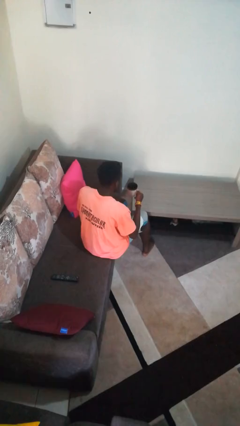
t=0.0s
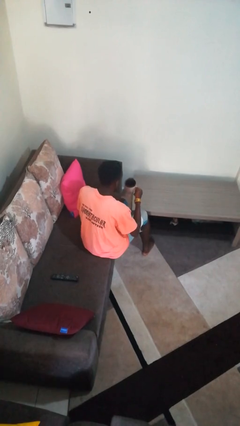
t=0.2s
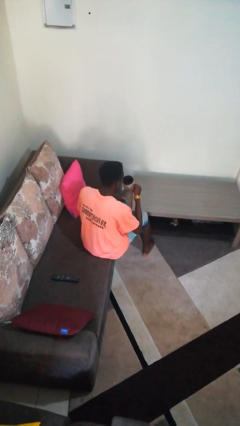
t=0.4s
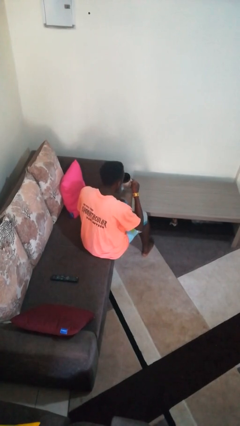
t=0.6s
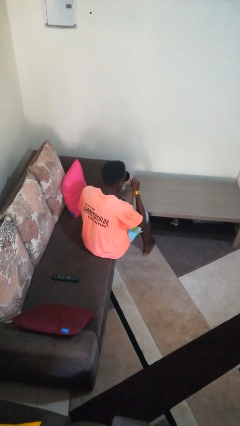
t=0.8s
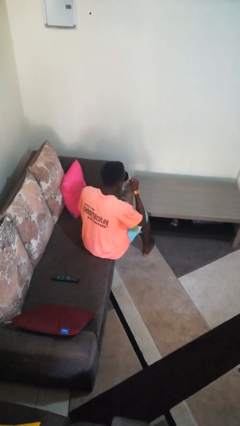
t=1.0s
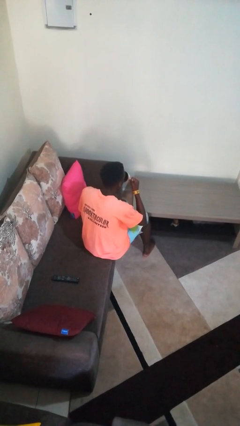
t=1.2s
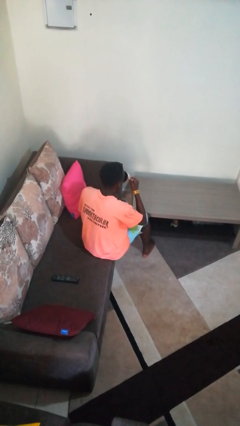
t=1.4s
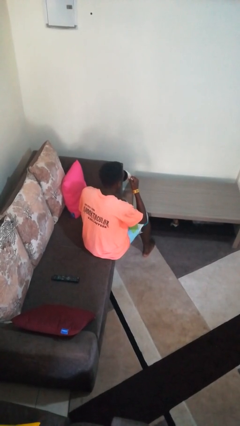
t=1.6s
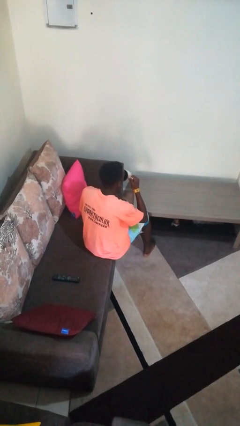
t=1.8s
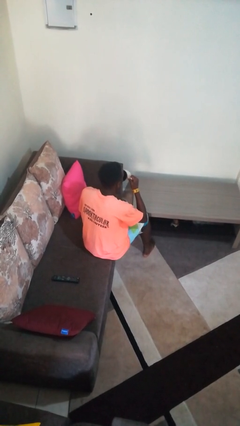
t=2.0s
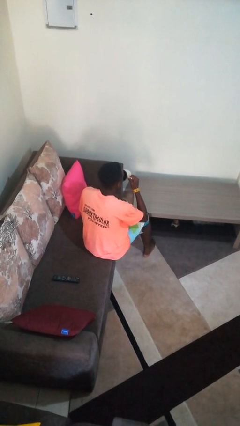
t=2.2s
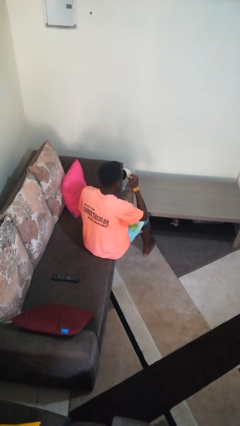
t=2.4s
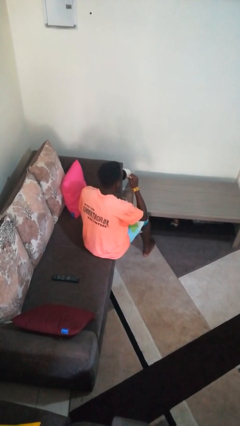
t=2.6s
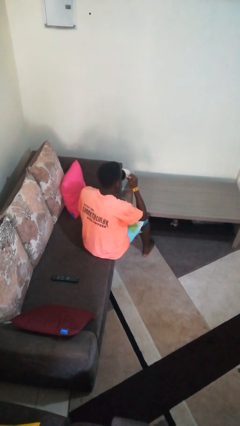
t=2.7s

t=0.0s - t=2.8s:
person drinks from mug

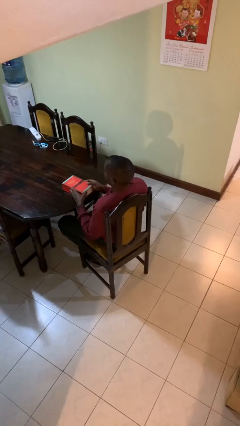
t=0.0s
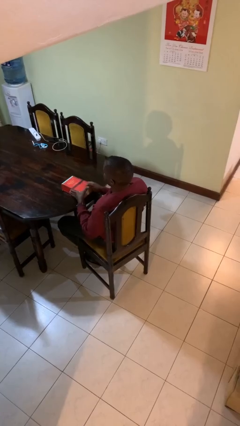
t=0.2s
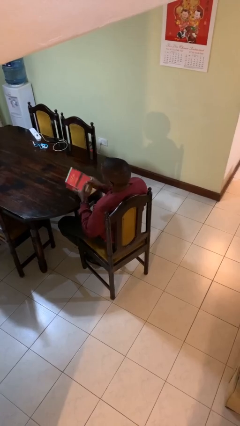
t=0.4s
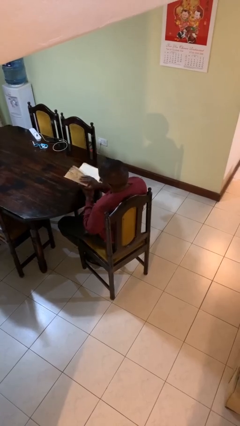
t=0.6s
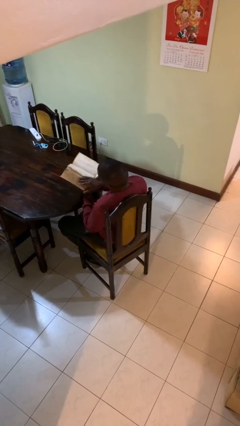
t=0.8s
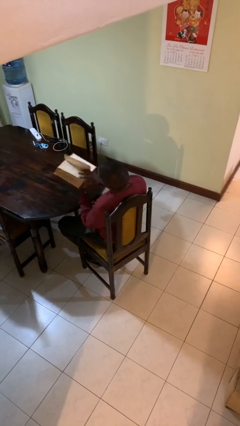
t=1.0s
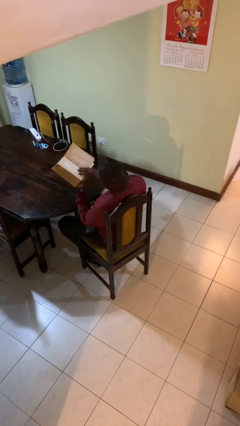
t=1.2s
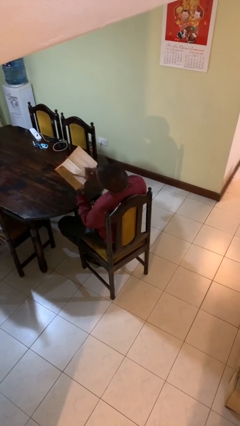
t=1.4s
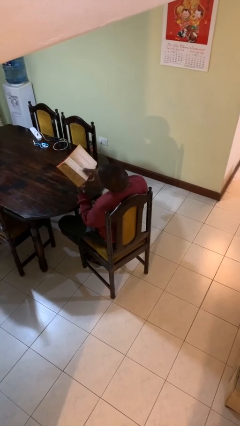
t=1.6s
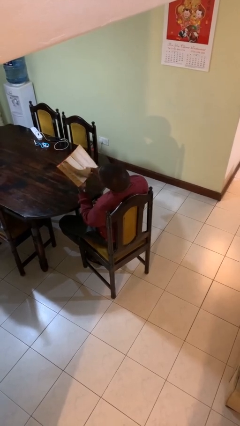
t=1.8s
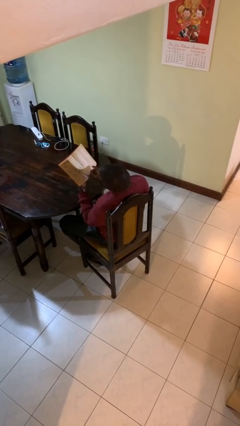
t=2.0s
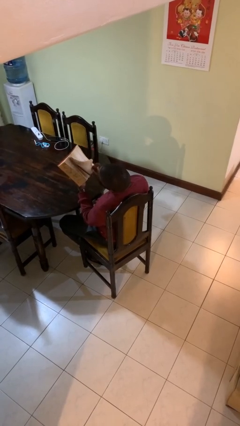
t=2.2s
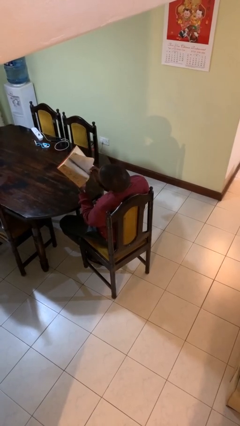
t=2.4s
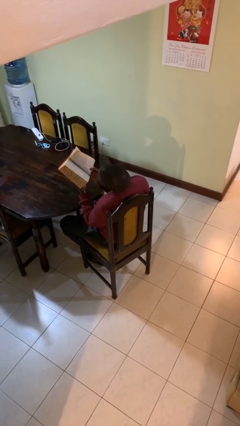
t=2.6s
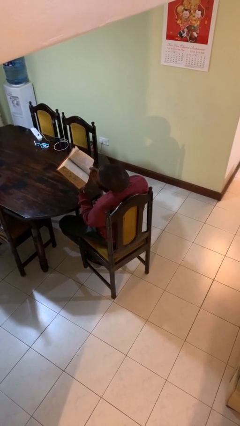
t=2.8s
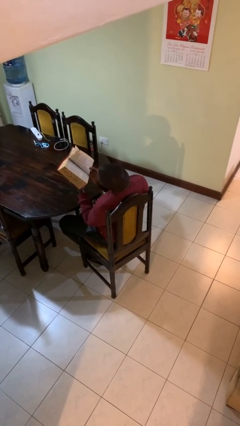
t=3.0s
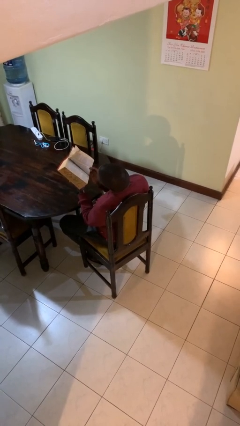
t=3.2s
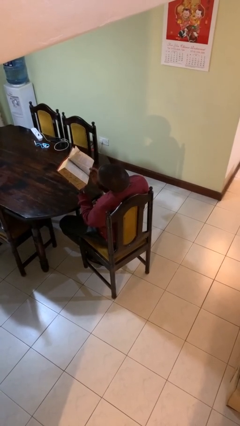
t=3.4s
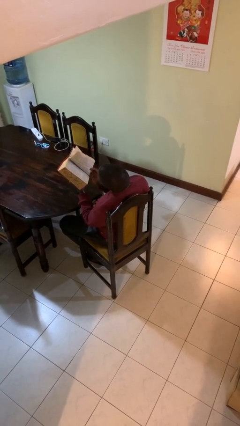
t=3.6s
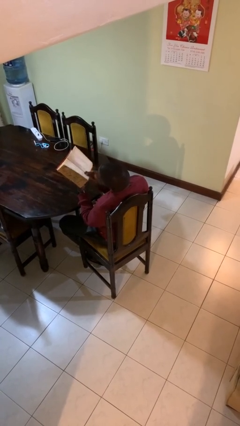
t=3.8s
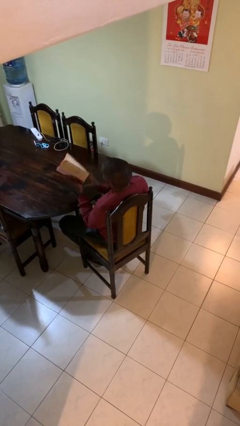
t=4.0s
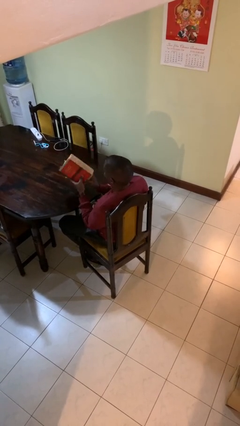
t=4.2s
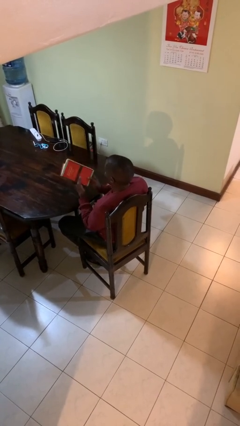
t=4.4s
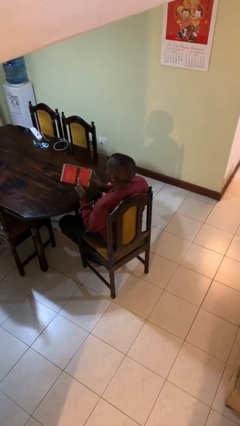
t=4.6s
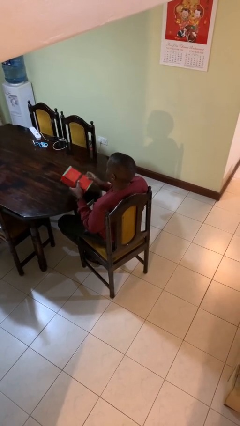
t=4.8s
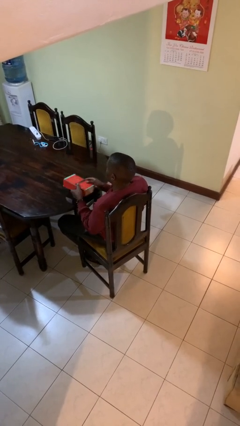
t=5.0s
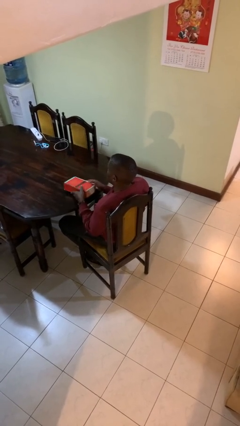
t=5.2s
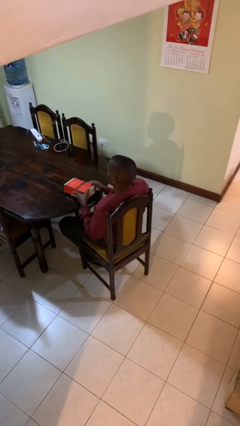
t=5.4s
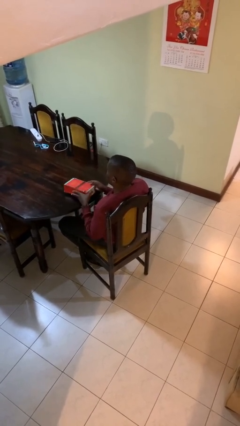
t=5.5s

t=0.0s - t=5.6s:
person reads book

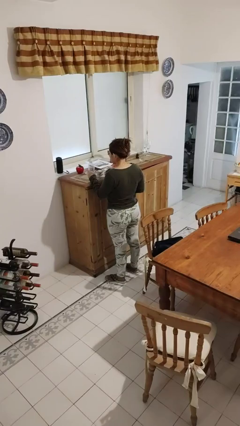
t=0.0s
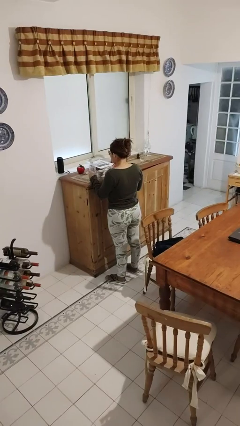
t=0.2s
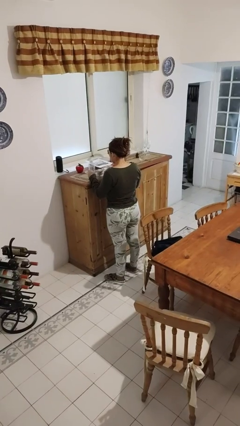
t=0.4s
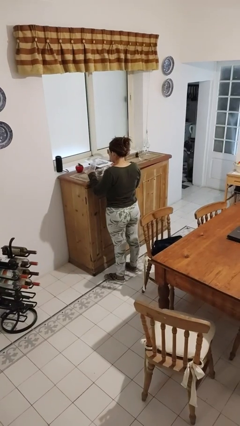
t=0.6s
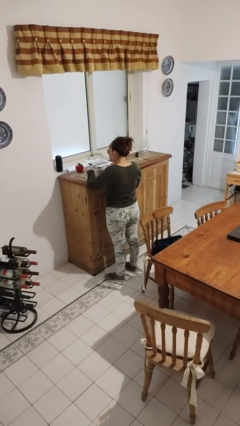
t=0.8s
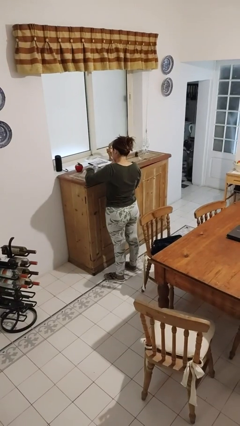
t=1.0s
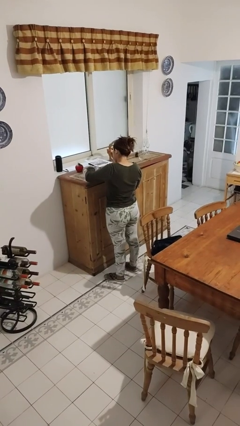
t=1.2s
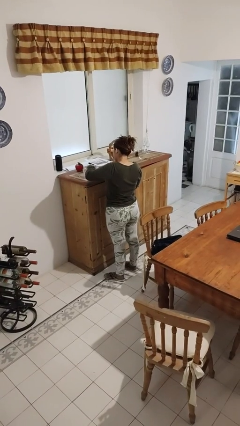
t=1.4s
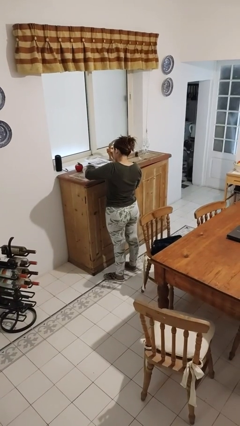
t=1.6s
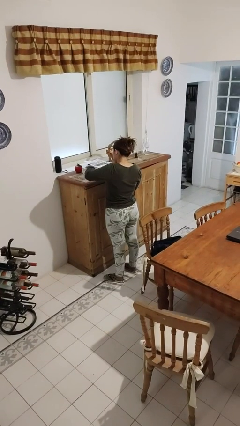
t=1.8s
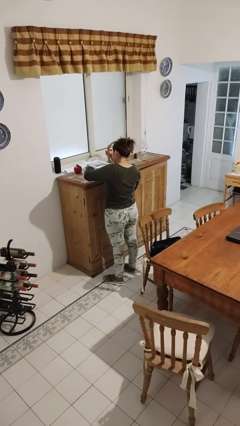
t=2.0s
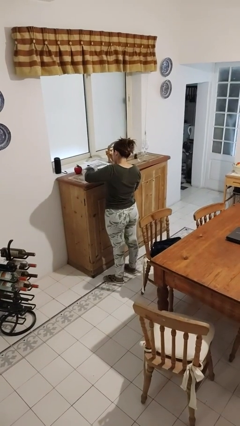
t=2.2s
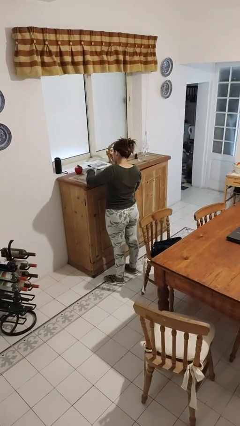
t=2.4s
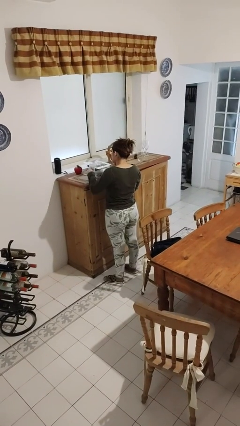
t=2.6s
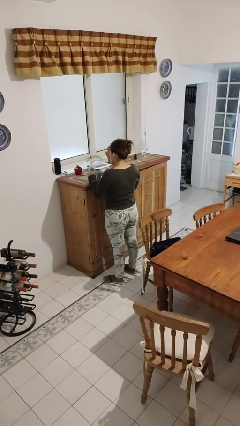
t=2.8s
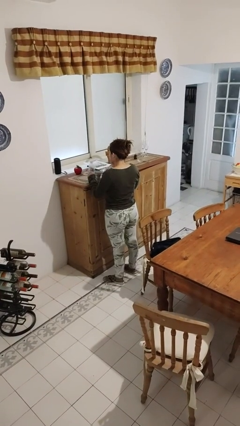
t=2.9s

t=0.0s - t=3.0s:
person pours liquid into cup

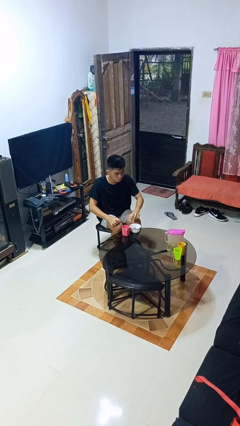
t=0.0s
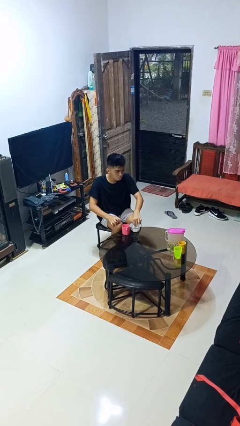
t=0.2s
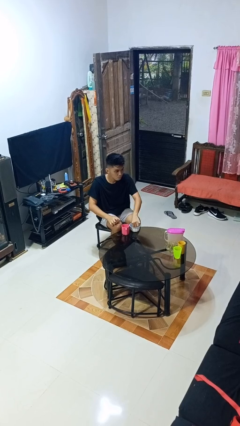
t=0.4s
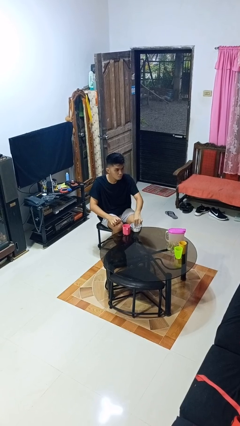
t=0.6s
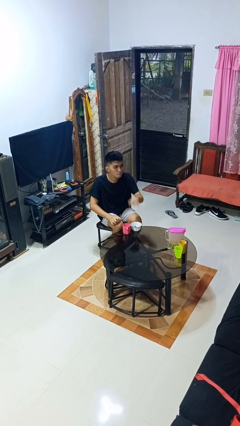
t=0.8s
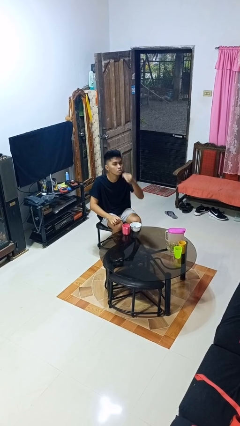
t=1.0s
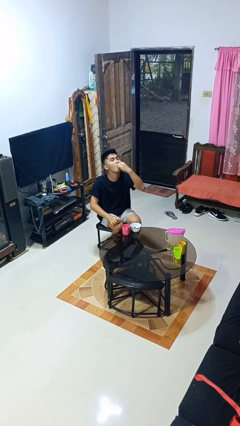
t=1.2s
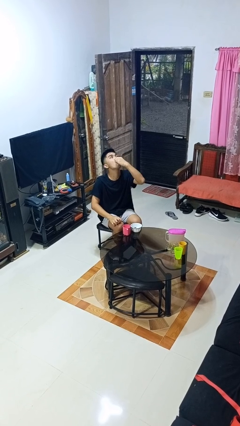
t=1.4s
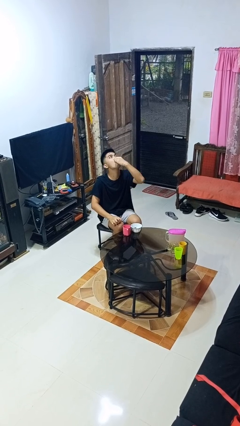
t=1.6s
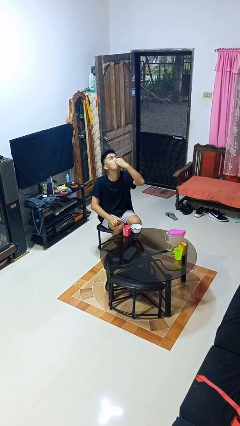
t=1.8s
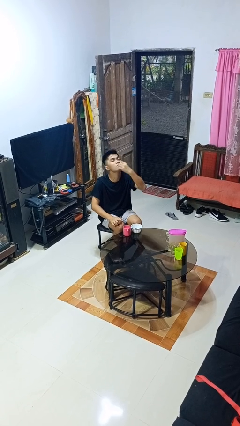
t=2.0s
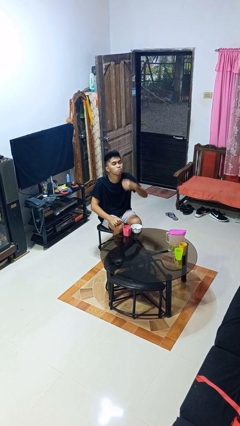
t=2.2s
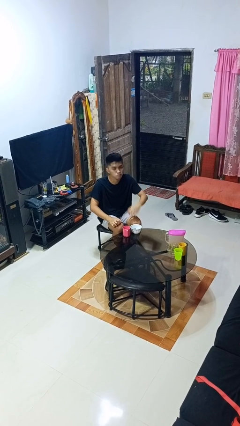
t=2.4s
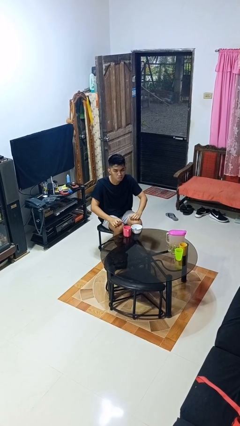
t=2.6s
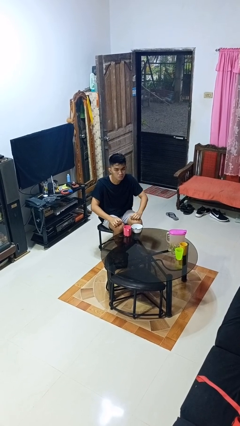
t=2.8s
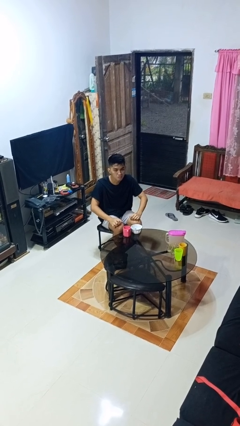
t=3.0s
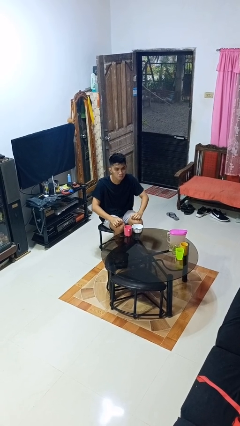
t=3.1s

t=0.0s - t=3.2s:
person takes medicine pills

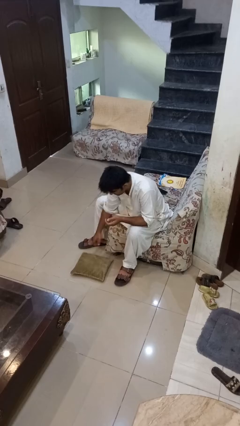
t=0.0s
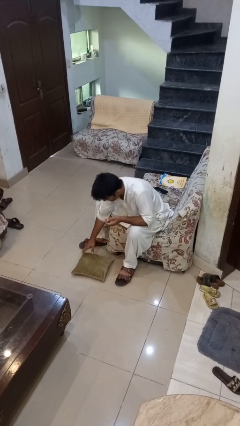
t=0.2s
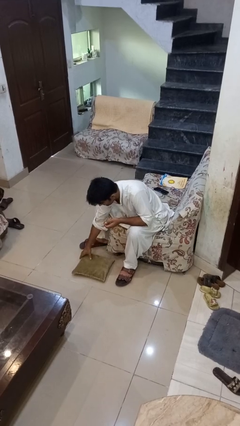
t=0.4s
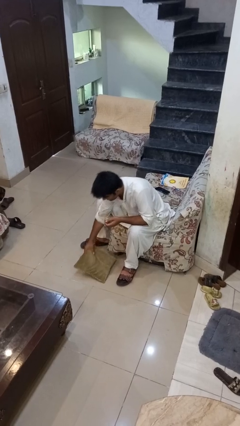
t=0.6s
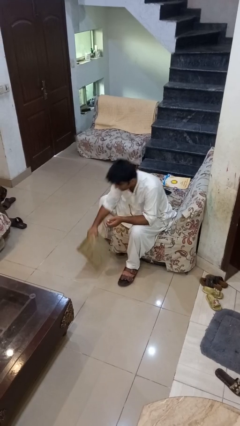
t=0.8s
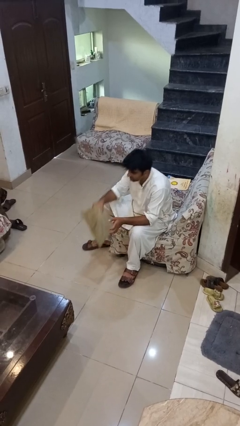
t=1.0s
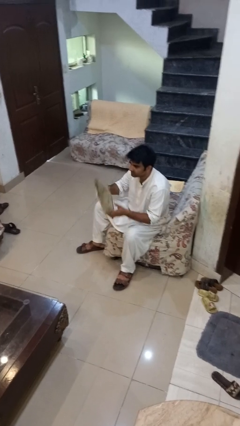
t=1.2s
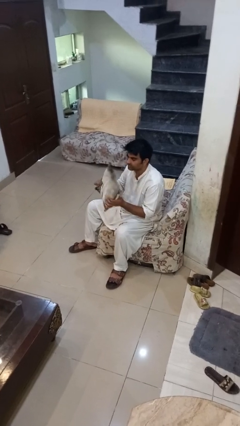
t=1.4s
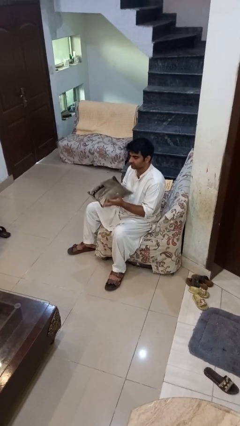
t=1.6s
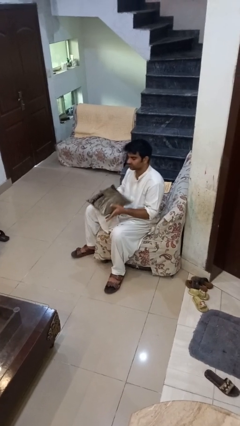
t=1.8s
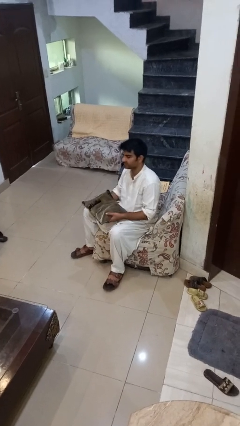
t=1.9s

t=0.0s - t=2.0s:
person picks up object from floor

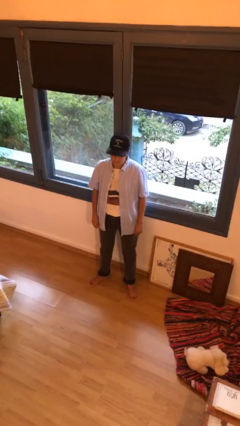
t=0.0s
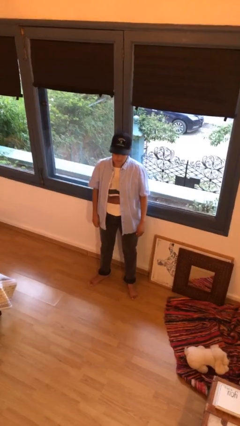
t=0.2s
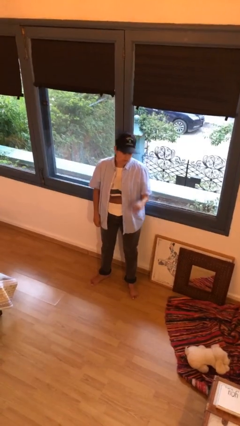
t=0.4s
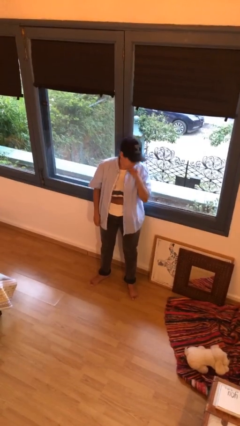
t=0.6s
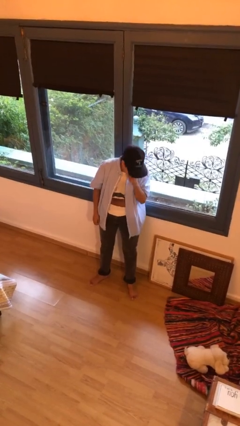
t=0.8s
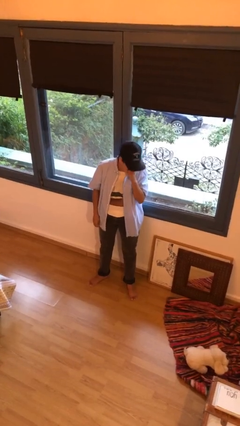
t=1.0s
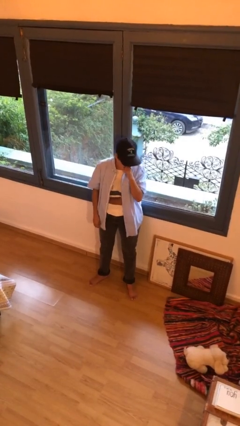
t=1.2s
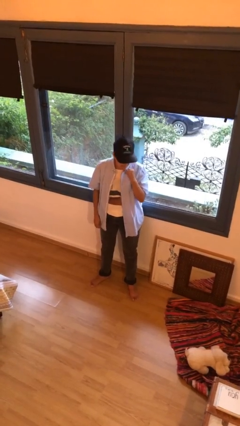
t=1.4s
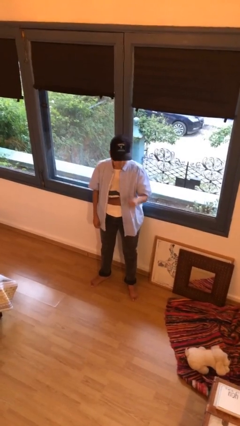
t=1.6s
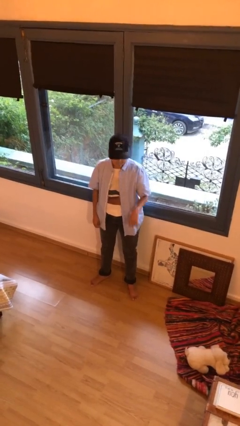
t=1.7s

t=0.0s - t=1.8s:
person sneezes into hand
